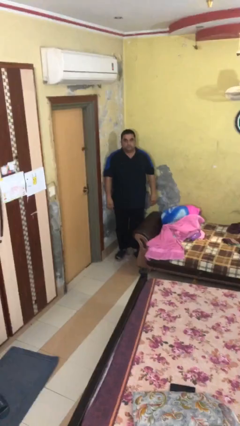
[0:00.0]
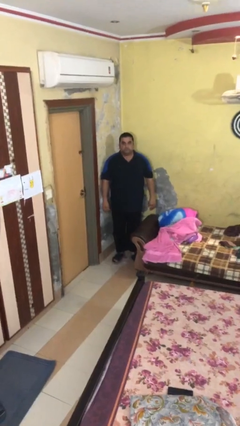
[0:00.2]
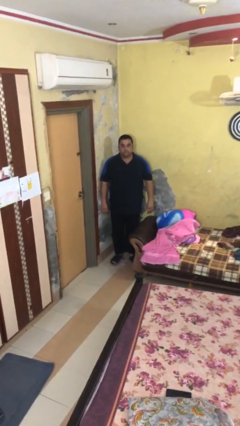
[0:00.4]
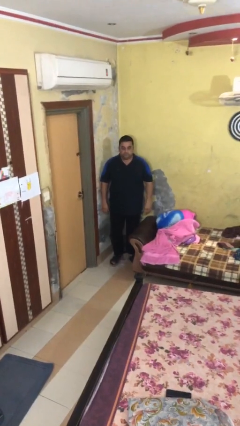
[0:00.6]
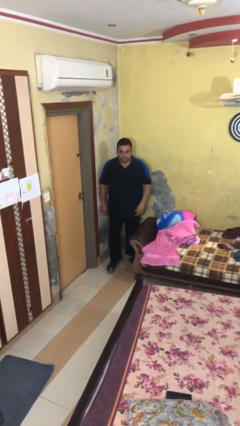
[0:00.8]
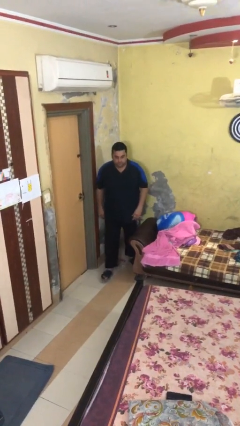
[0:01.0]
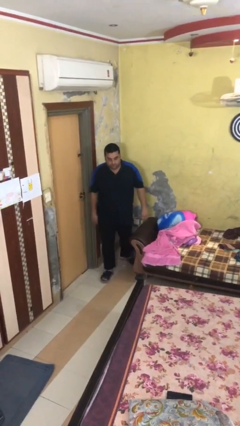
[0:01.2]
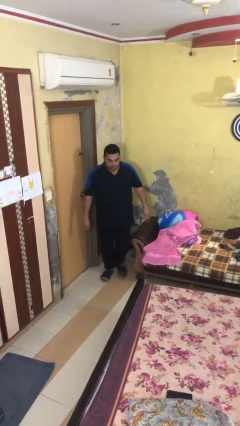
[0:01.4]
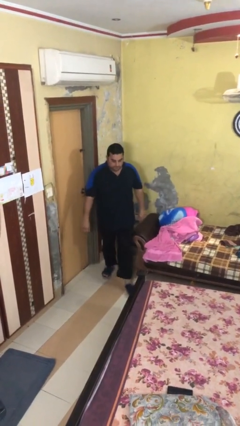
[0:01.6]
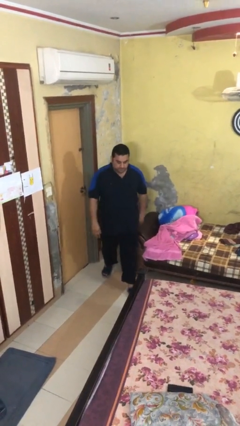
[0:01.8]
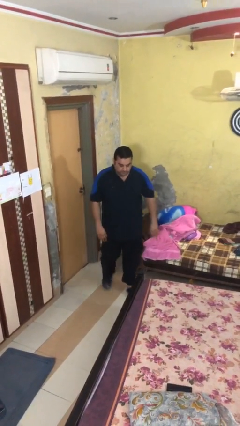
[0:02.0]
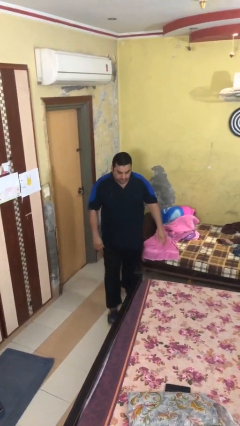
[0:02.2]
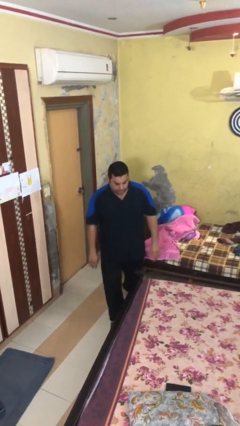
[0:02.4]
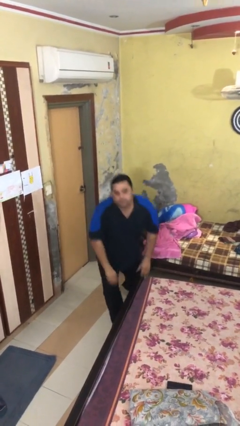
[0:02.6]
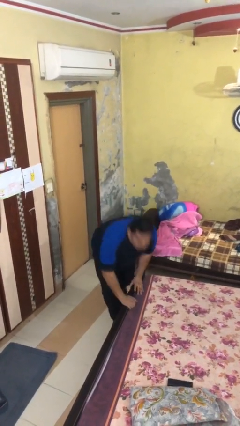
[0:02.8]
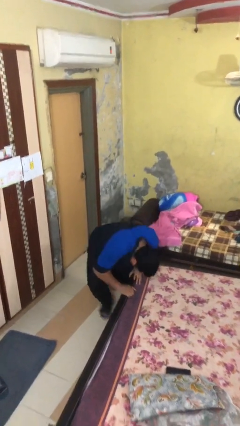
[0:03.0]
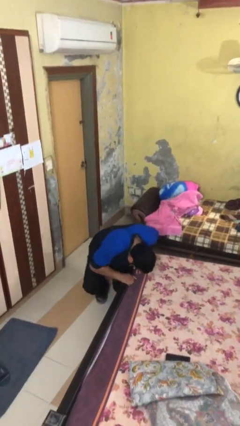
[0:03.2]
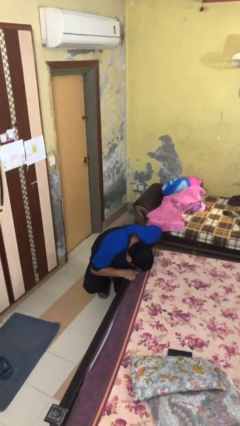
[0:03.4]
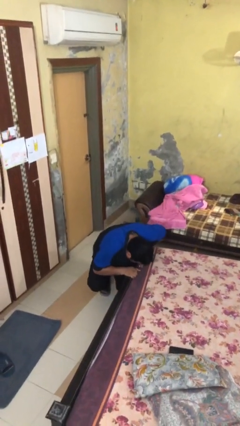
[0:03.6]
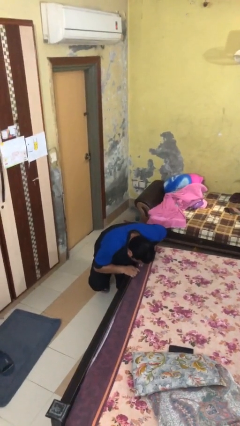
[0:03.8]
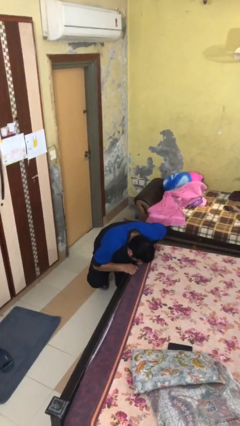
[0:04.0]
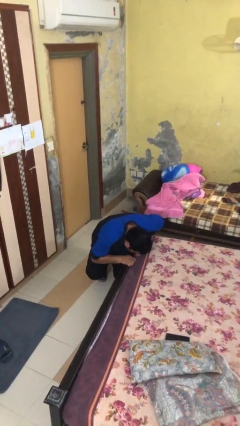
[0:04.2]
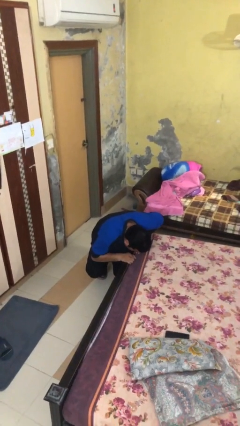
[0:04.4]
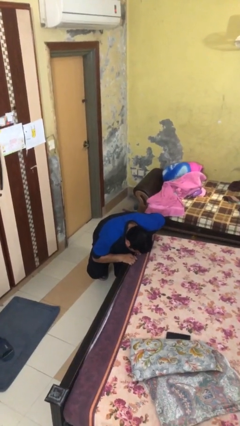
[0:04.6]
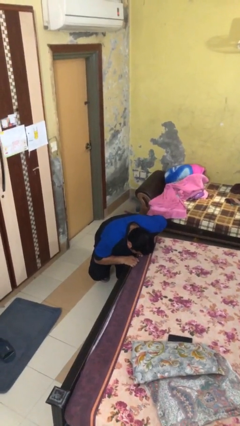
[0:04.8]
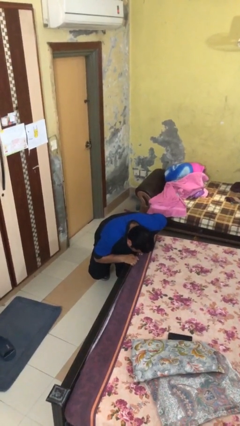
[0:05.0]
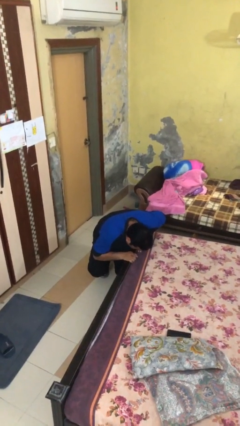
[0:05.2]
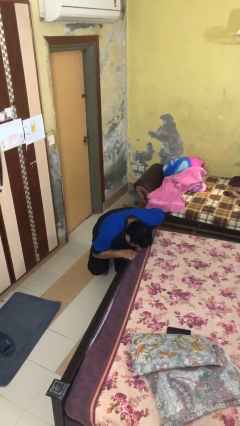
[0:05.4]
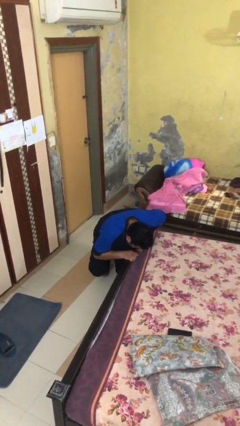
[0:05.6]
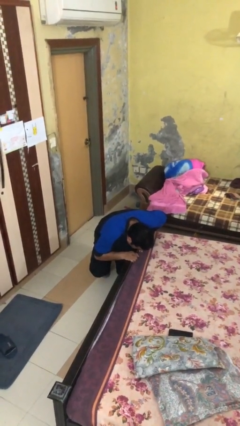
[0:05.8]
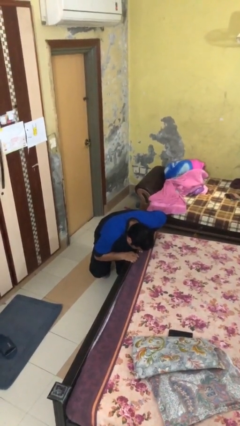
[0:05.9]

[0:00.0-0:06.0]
person trips on object on floor

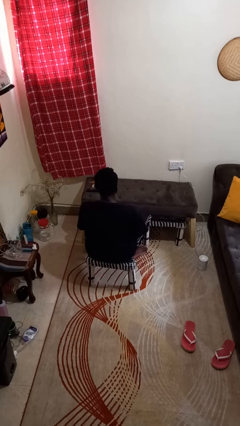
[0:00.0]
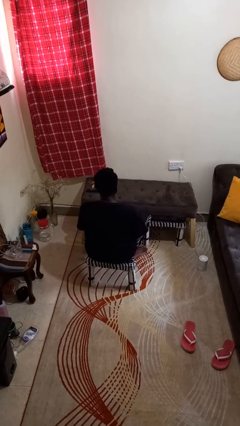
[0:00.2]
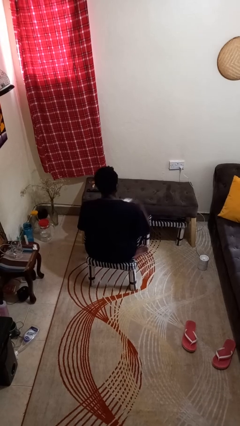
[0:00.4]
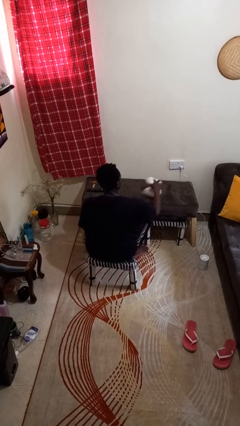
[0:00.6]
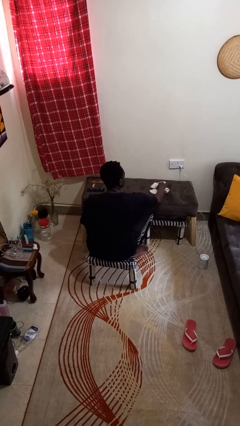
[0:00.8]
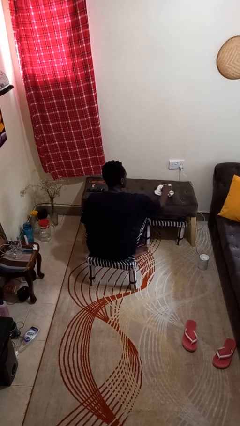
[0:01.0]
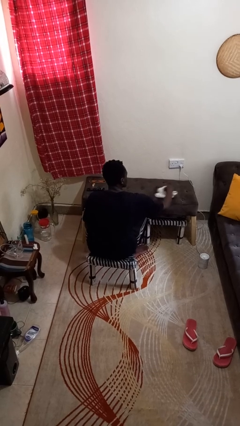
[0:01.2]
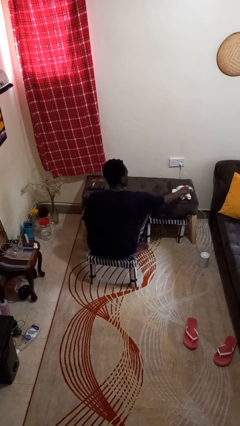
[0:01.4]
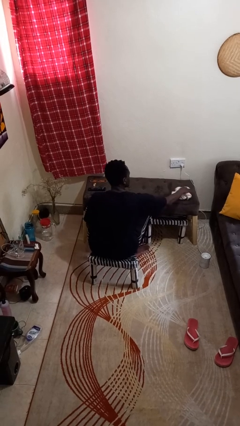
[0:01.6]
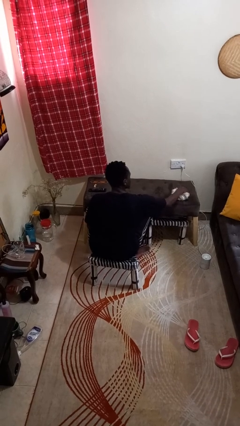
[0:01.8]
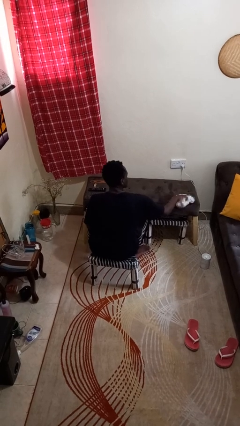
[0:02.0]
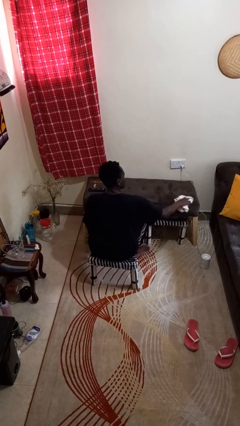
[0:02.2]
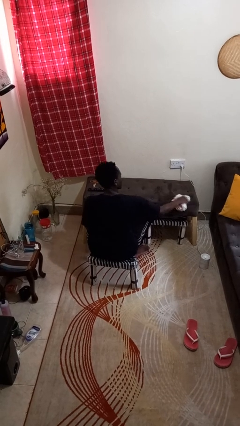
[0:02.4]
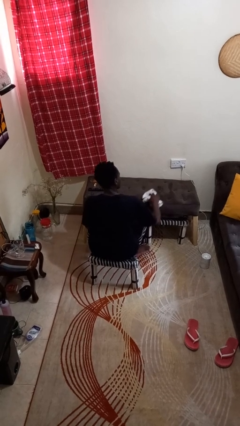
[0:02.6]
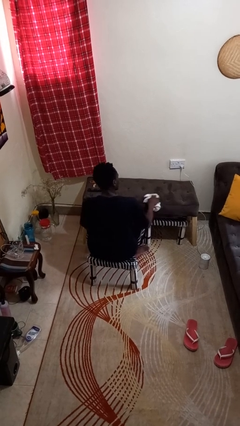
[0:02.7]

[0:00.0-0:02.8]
person cleans table with rag

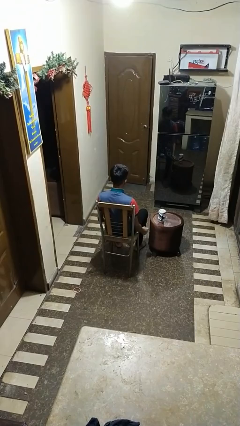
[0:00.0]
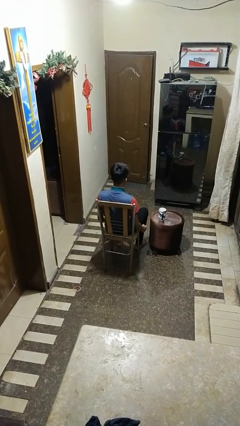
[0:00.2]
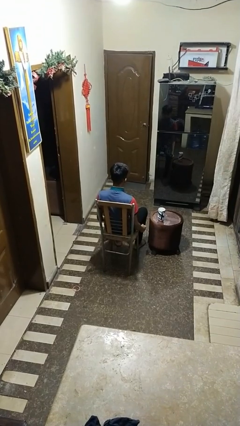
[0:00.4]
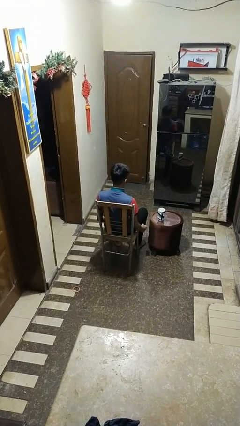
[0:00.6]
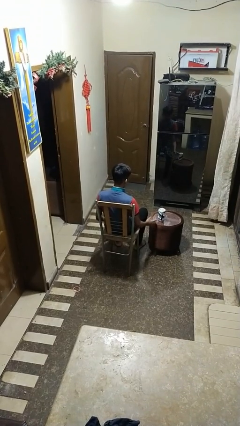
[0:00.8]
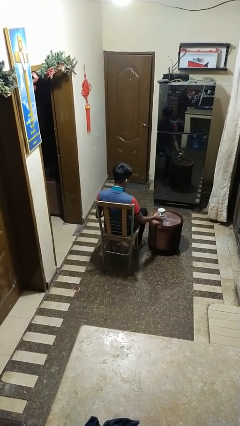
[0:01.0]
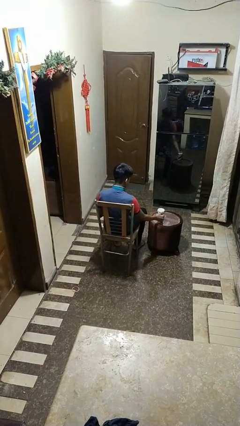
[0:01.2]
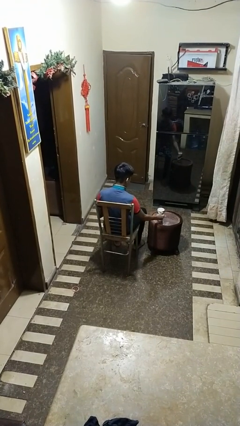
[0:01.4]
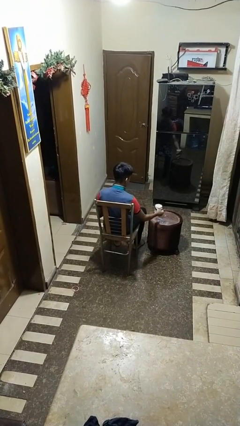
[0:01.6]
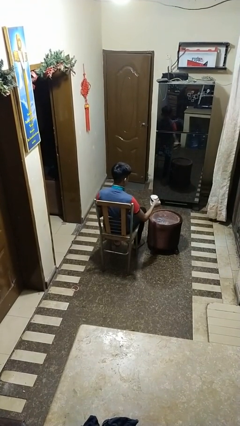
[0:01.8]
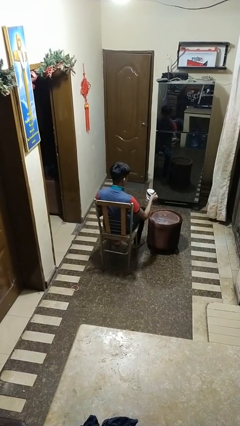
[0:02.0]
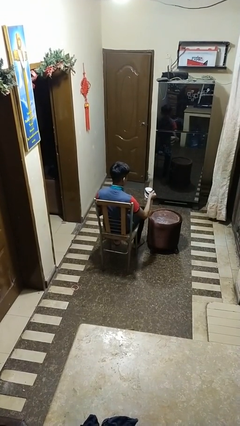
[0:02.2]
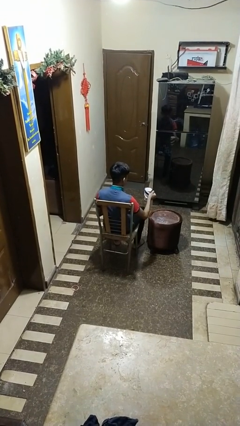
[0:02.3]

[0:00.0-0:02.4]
person picks up object from table

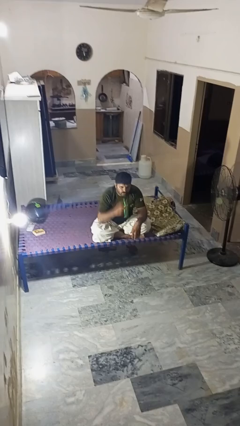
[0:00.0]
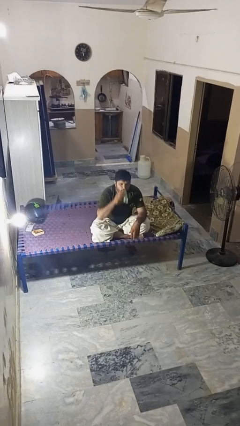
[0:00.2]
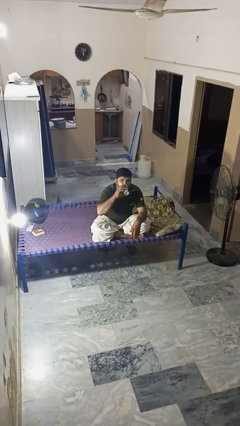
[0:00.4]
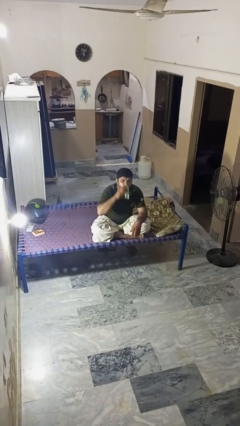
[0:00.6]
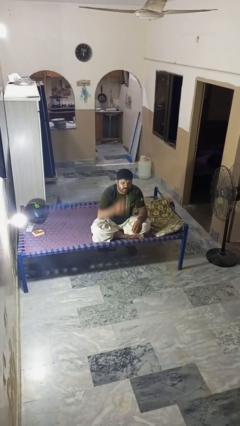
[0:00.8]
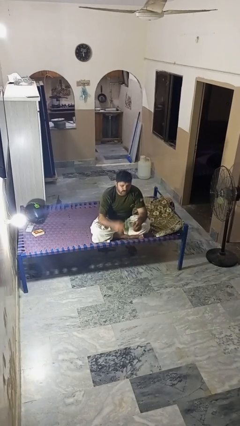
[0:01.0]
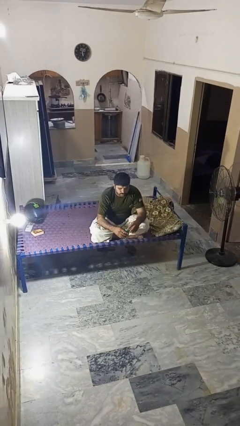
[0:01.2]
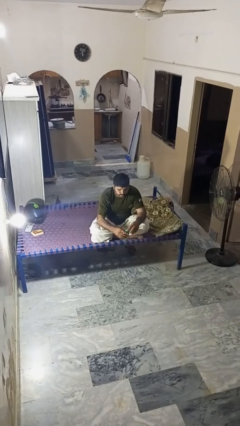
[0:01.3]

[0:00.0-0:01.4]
person drinks from beverage can

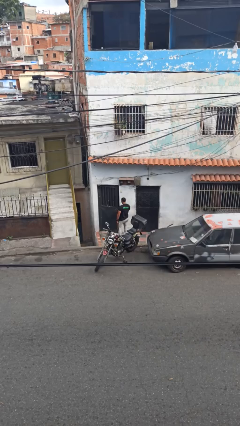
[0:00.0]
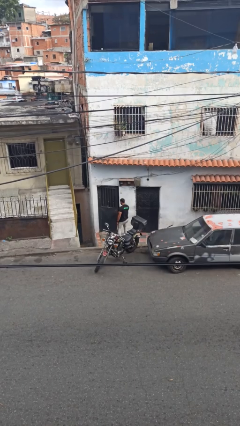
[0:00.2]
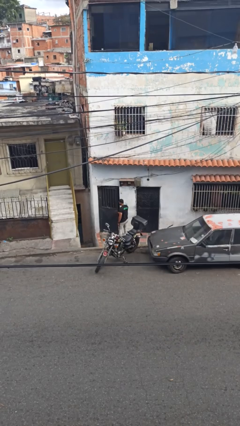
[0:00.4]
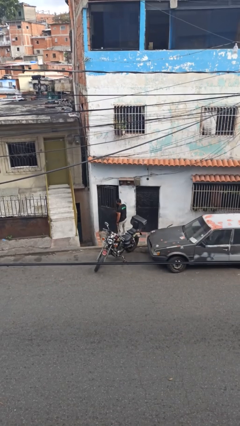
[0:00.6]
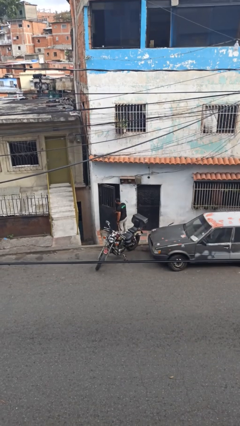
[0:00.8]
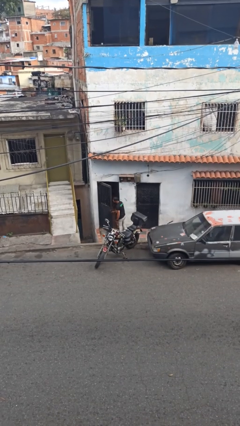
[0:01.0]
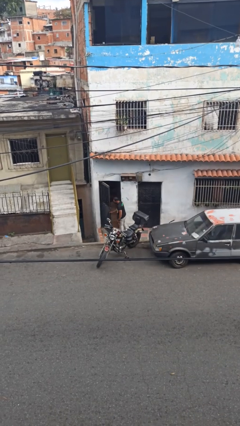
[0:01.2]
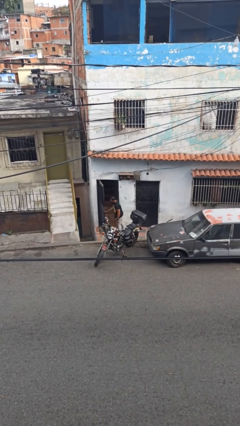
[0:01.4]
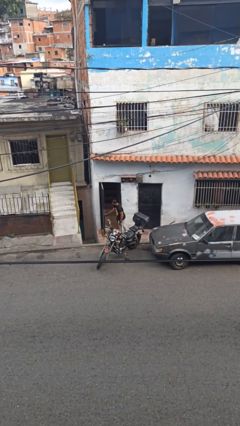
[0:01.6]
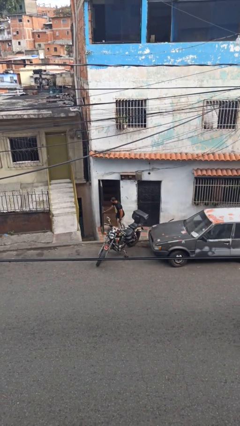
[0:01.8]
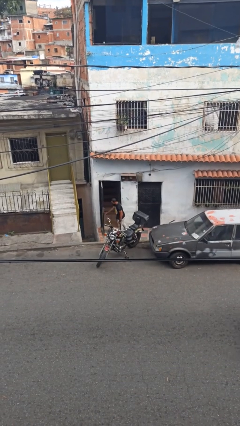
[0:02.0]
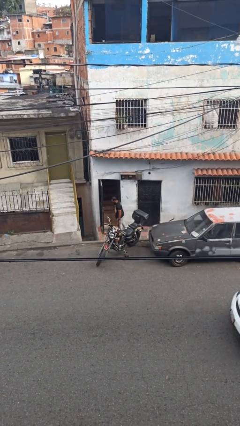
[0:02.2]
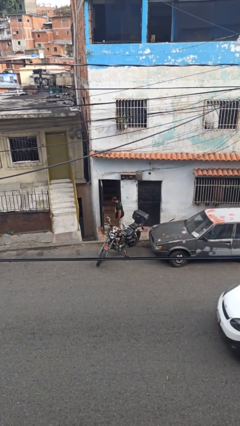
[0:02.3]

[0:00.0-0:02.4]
person opens facility door

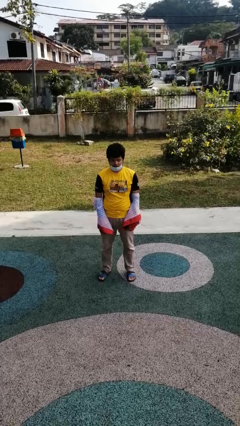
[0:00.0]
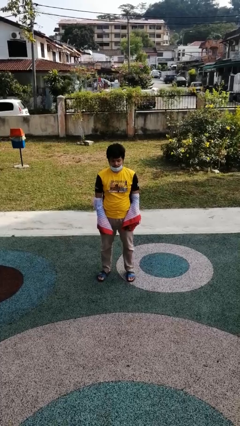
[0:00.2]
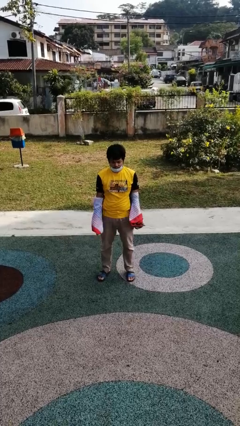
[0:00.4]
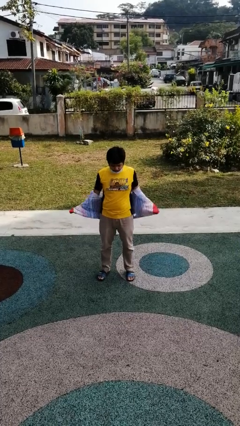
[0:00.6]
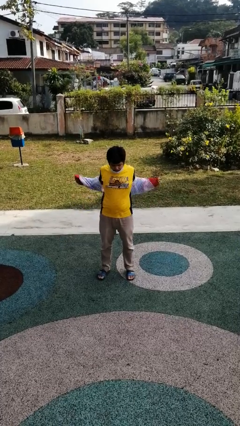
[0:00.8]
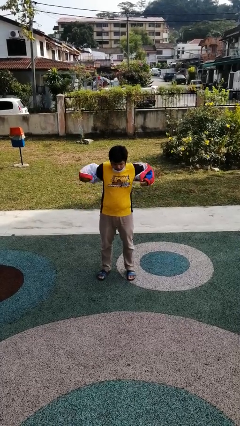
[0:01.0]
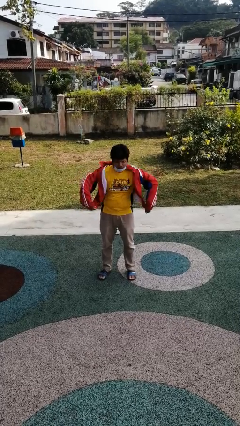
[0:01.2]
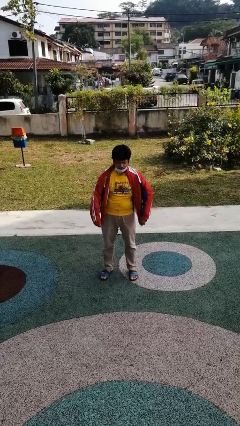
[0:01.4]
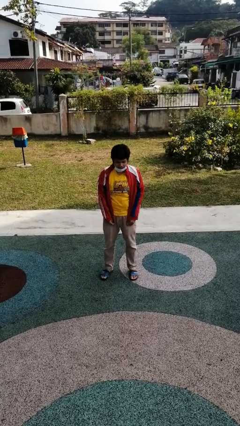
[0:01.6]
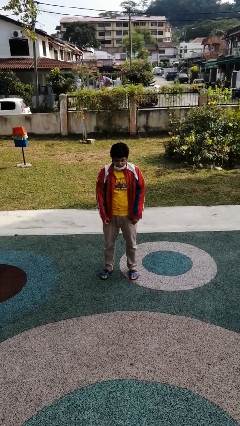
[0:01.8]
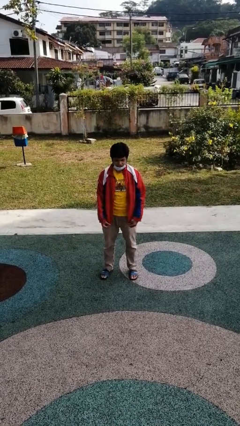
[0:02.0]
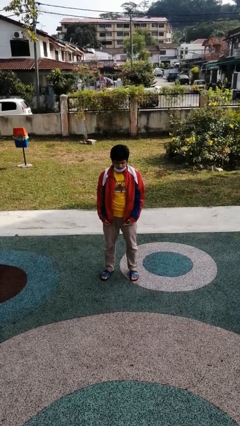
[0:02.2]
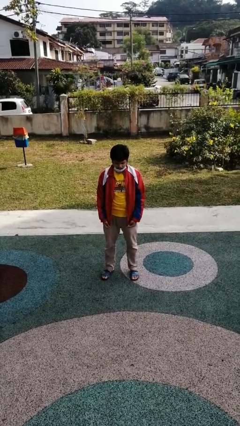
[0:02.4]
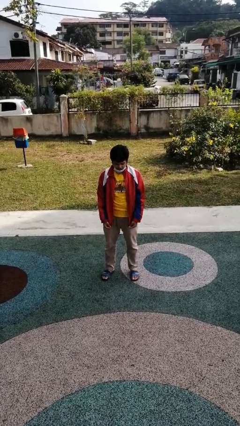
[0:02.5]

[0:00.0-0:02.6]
person puts on jacket
